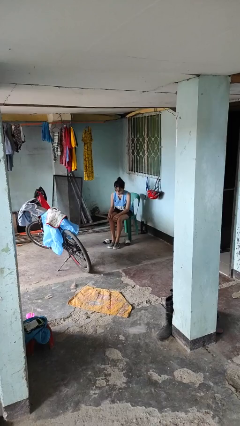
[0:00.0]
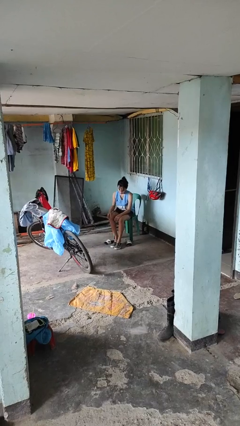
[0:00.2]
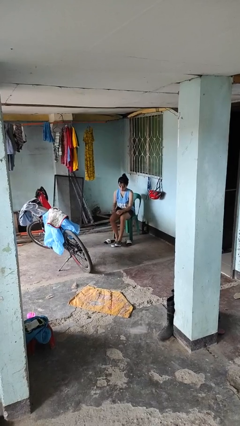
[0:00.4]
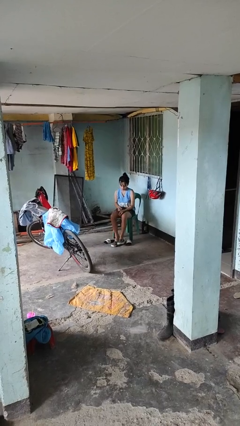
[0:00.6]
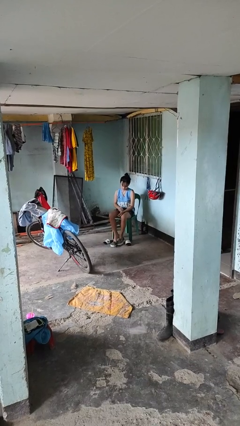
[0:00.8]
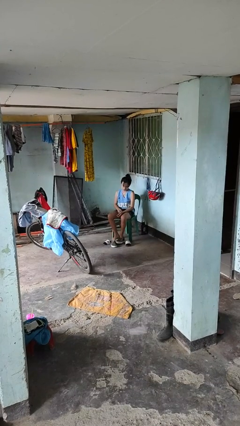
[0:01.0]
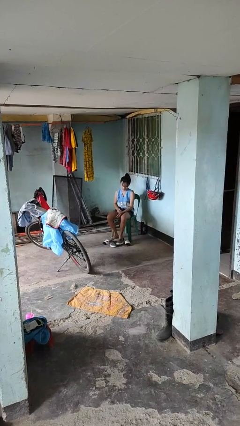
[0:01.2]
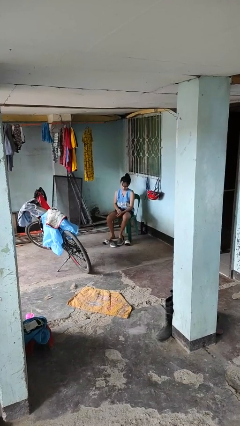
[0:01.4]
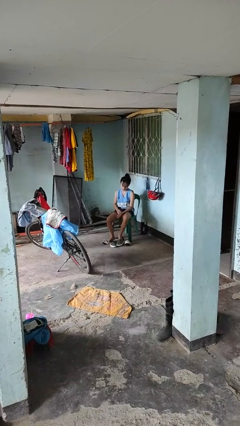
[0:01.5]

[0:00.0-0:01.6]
person takes off shoes

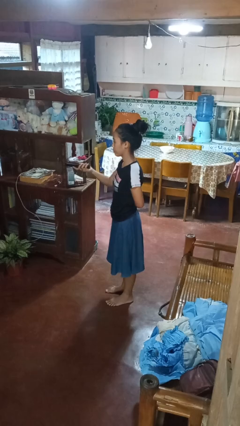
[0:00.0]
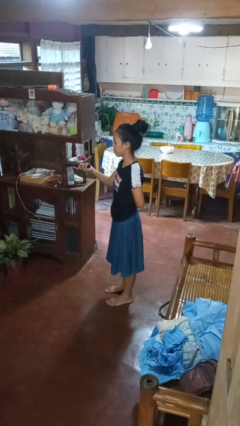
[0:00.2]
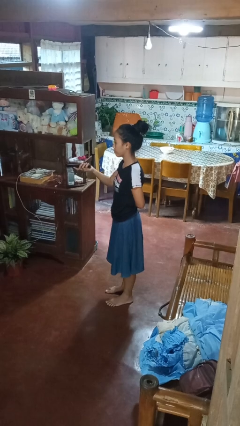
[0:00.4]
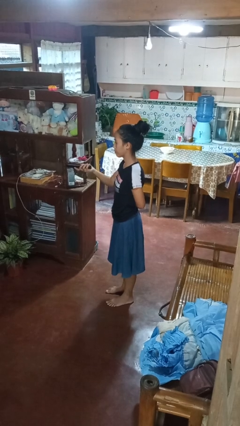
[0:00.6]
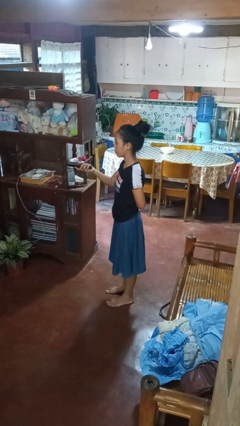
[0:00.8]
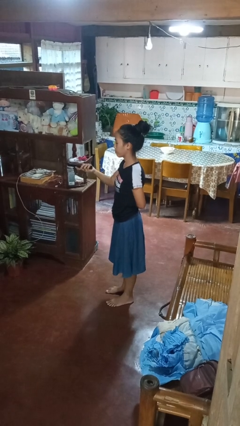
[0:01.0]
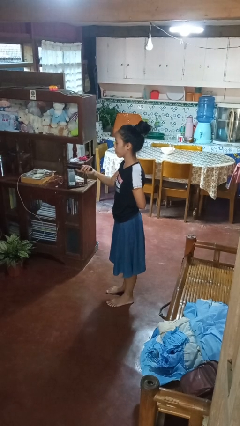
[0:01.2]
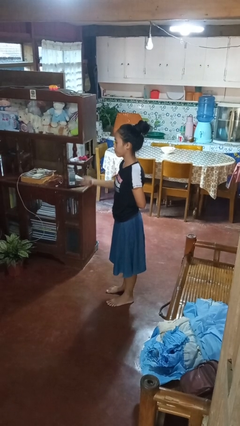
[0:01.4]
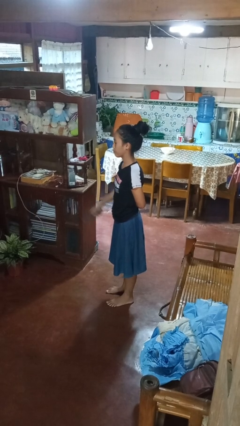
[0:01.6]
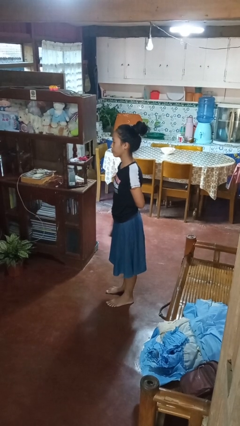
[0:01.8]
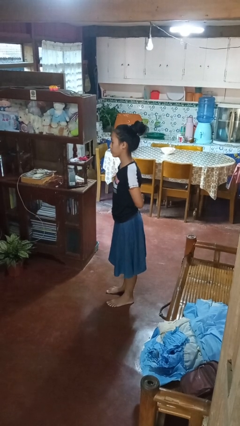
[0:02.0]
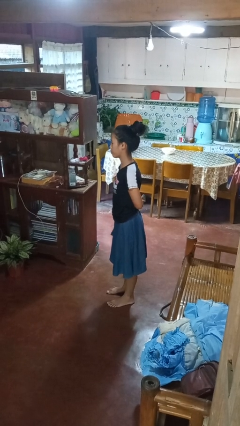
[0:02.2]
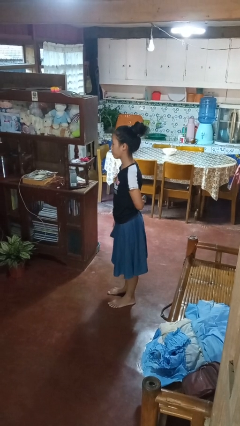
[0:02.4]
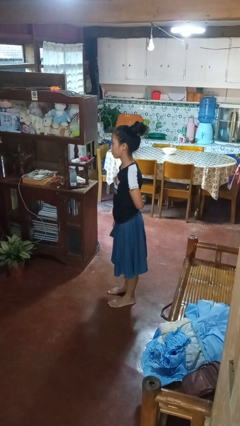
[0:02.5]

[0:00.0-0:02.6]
person uses television remote

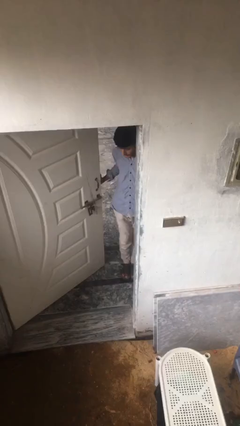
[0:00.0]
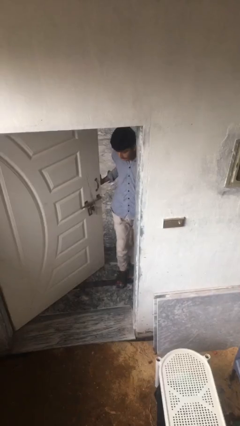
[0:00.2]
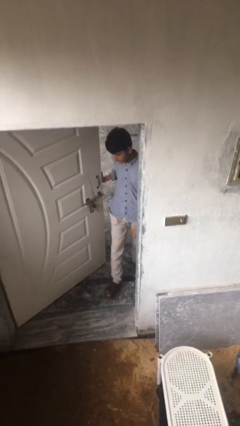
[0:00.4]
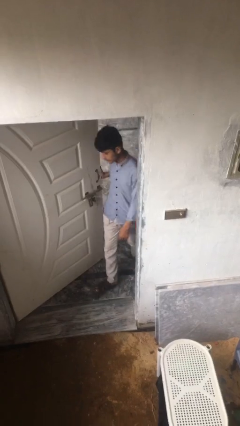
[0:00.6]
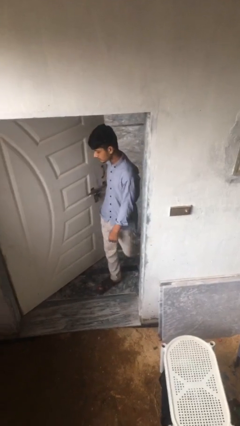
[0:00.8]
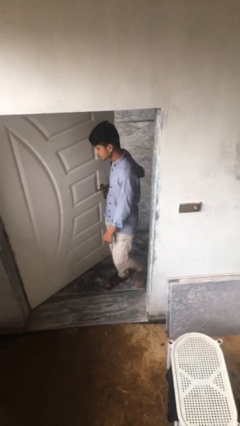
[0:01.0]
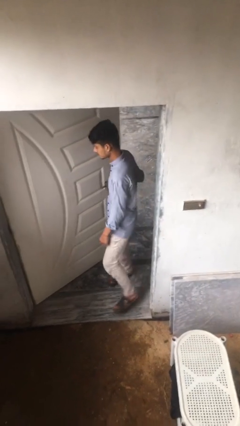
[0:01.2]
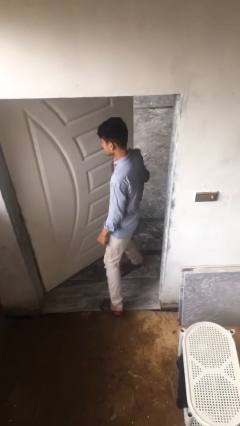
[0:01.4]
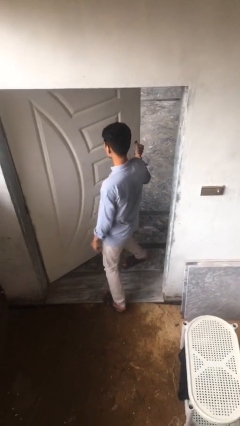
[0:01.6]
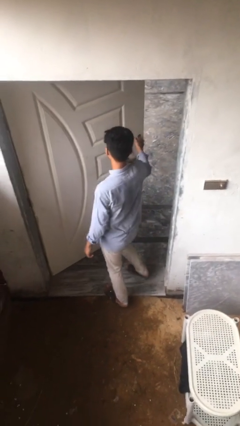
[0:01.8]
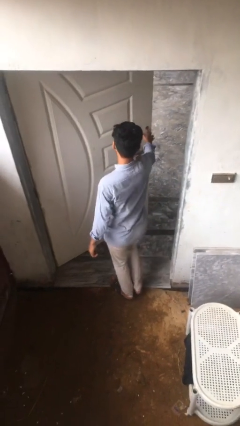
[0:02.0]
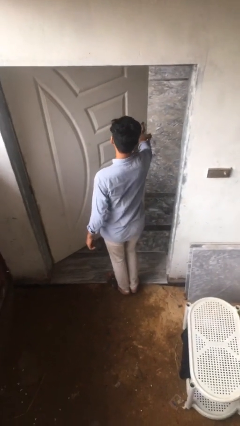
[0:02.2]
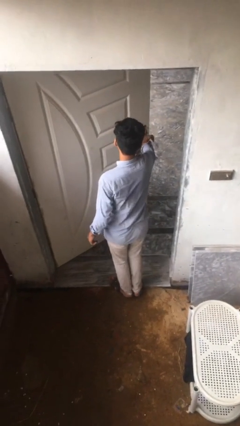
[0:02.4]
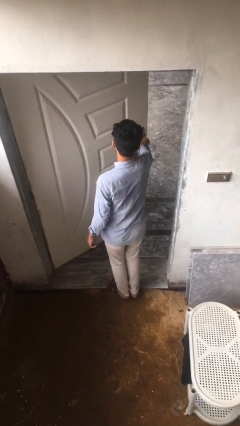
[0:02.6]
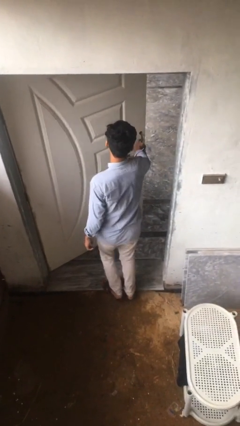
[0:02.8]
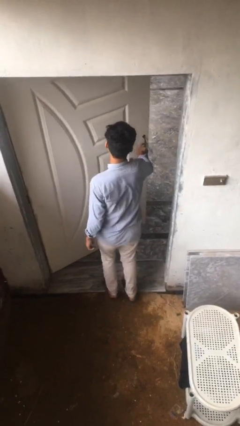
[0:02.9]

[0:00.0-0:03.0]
person enters scene through structure

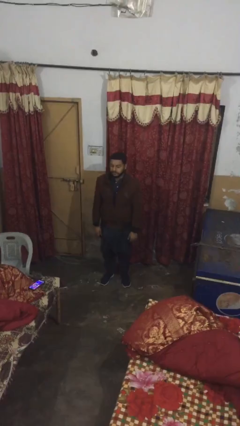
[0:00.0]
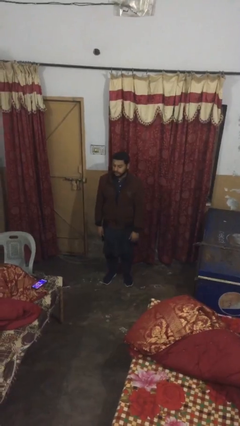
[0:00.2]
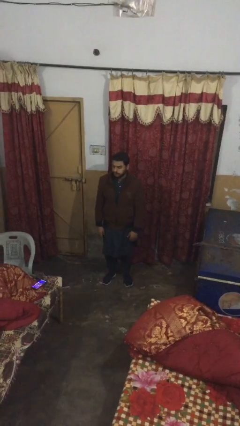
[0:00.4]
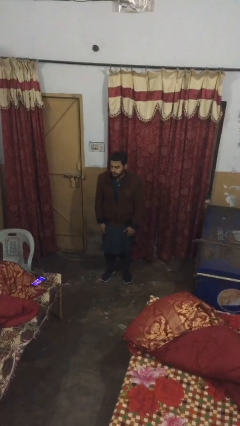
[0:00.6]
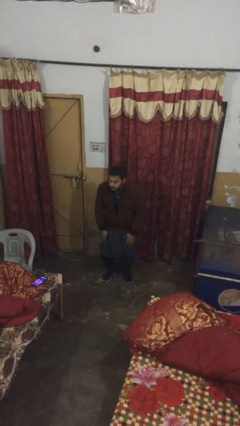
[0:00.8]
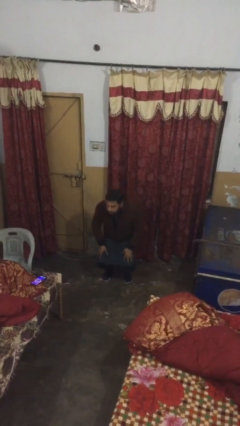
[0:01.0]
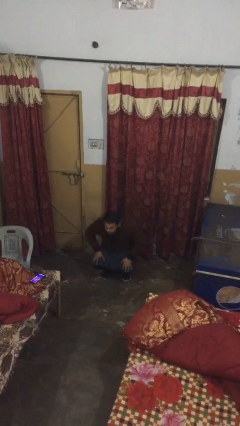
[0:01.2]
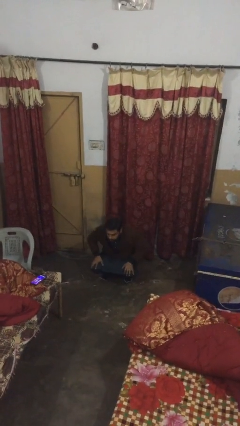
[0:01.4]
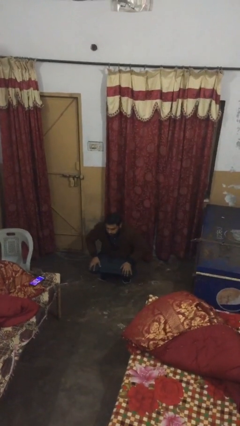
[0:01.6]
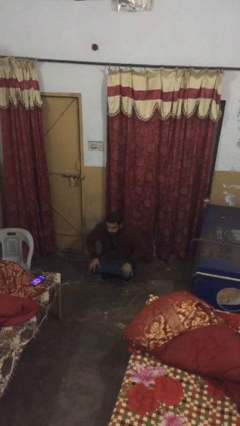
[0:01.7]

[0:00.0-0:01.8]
person sits down

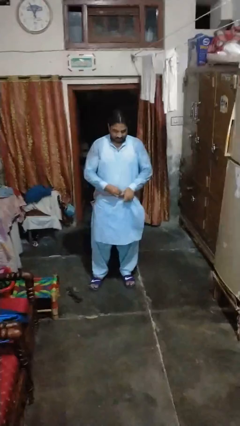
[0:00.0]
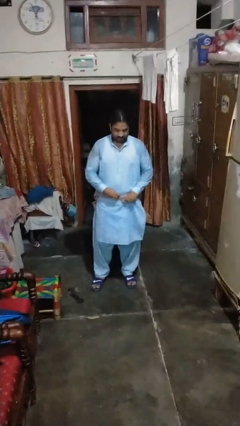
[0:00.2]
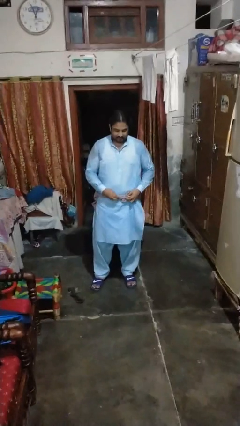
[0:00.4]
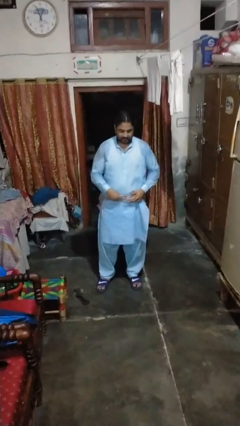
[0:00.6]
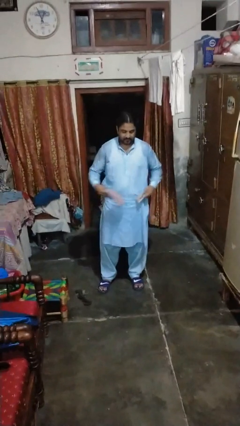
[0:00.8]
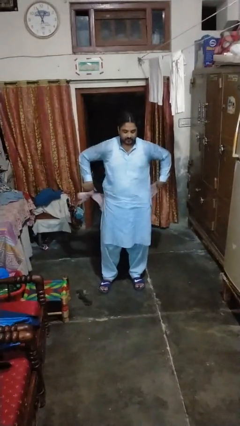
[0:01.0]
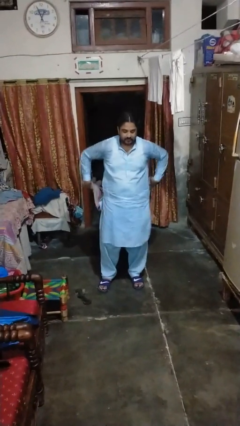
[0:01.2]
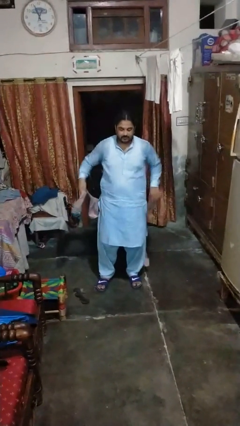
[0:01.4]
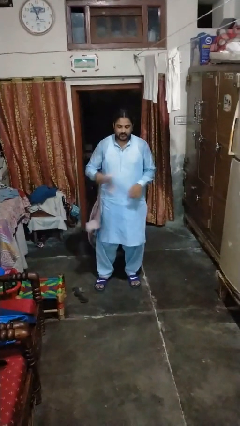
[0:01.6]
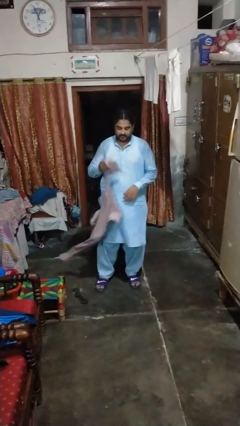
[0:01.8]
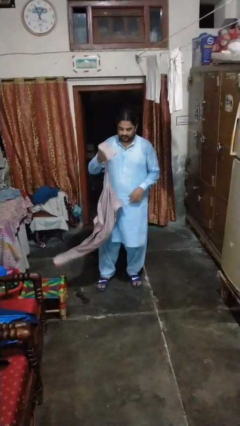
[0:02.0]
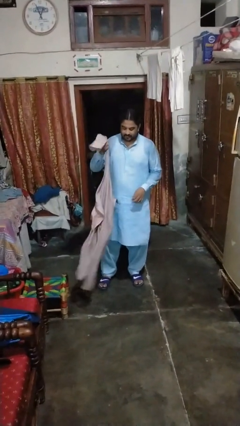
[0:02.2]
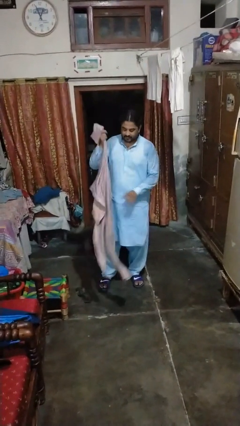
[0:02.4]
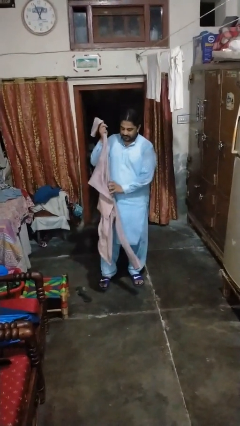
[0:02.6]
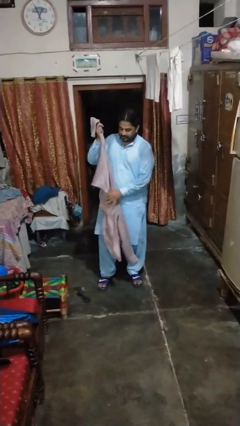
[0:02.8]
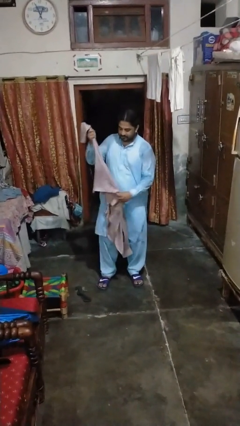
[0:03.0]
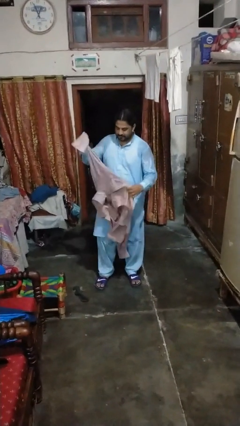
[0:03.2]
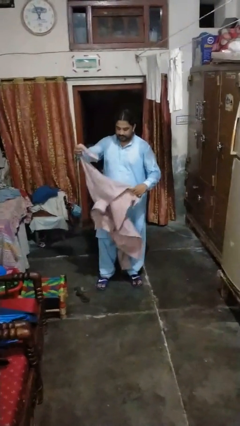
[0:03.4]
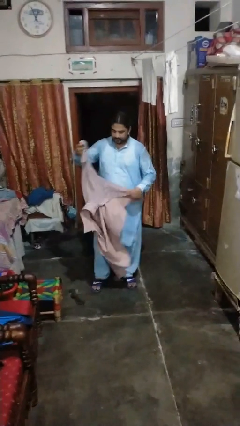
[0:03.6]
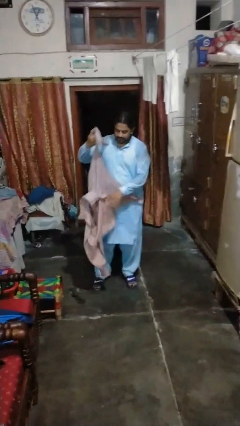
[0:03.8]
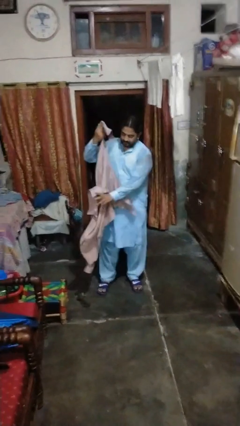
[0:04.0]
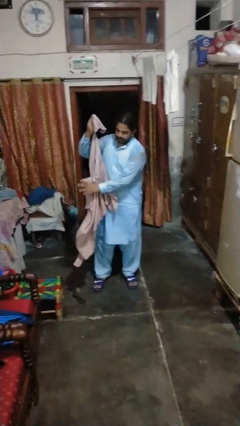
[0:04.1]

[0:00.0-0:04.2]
person unties jacket around waist

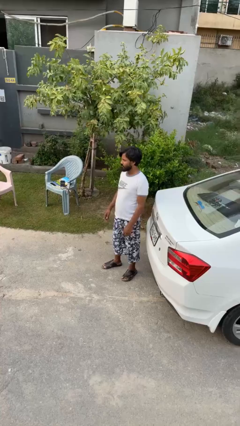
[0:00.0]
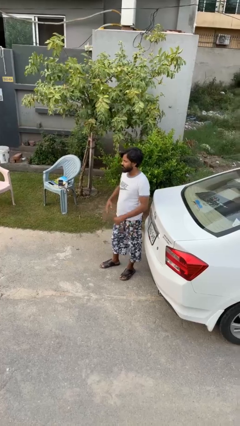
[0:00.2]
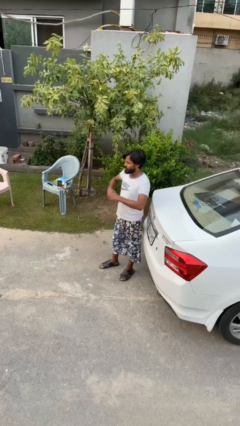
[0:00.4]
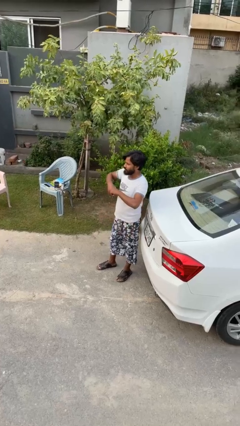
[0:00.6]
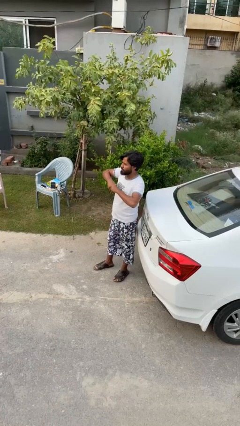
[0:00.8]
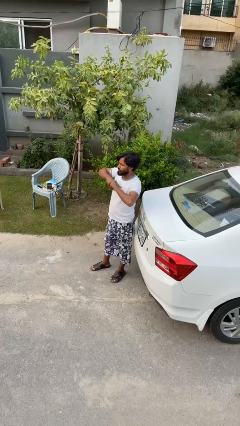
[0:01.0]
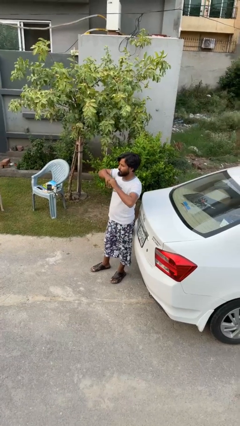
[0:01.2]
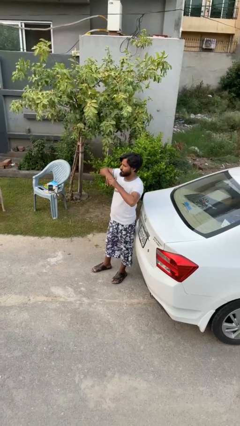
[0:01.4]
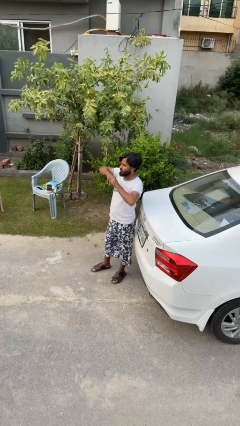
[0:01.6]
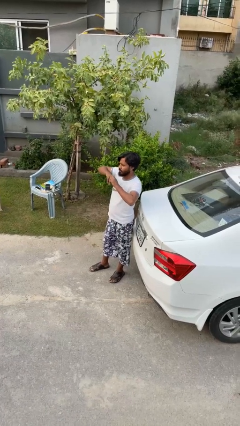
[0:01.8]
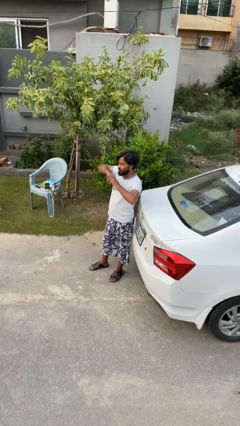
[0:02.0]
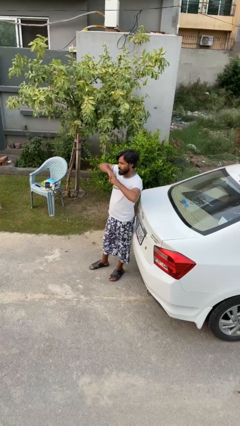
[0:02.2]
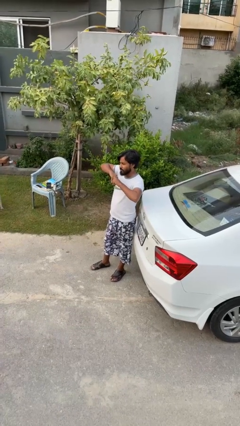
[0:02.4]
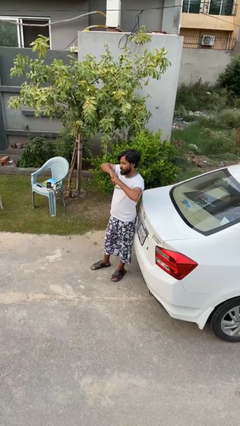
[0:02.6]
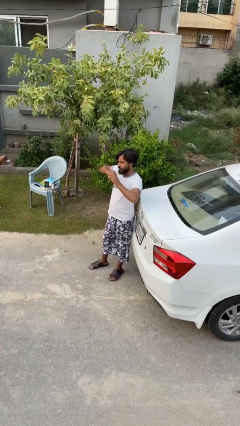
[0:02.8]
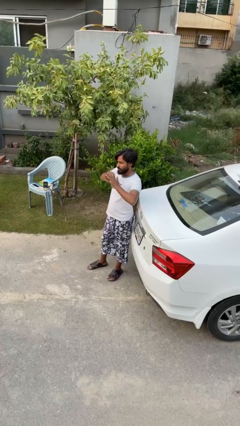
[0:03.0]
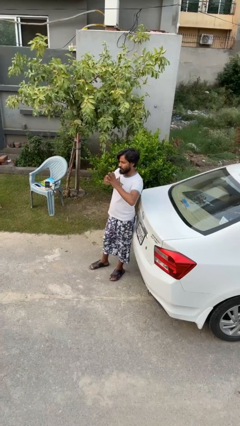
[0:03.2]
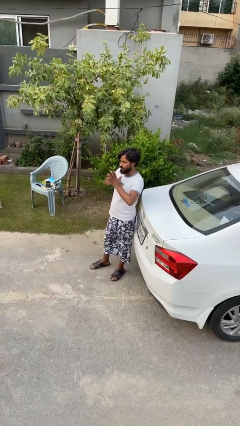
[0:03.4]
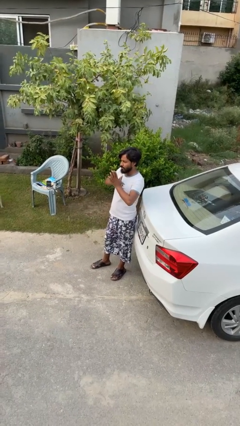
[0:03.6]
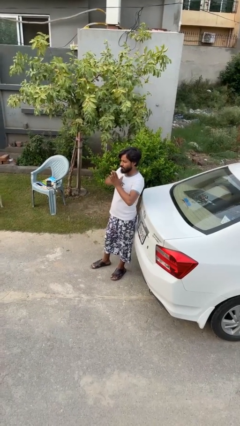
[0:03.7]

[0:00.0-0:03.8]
person cracks knuckles

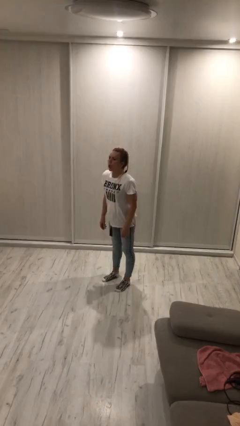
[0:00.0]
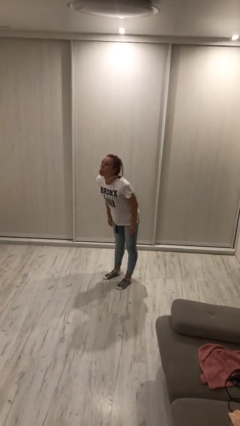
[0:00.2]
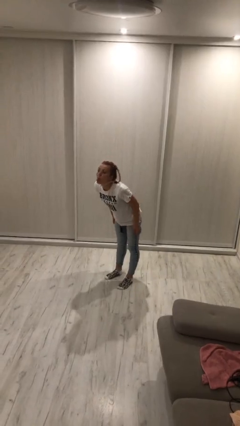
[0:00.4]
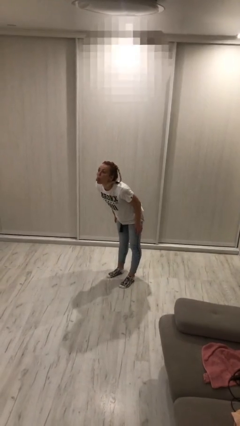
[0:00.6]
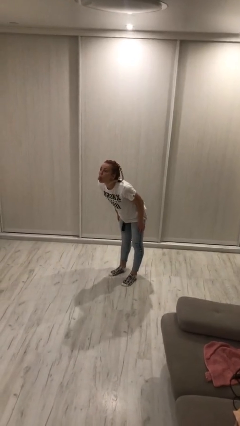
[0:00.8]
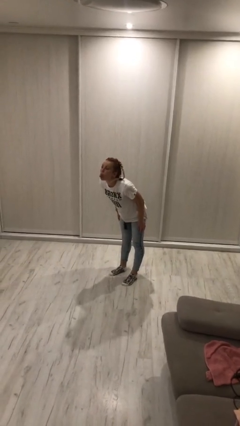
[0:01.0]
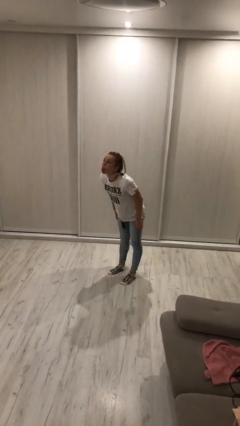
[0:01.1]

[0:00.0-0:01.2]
person sticks out tongue
